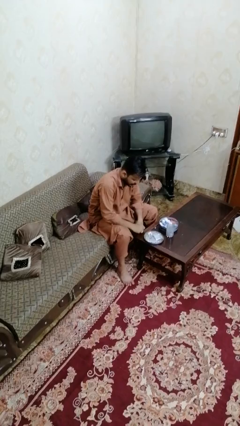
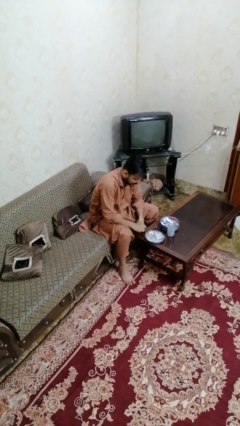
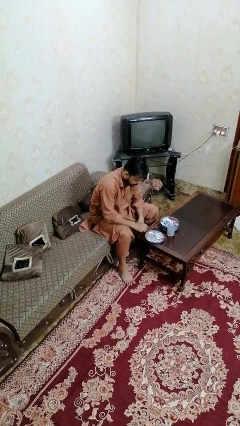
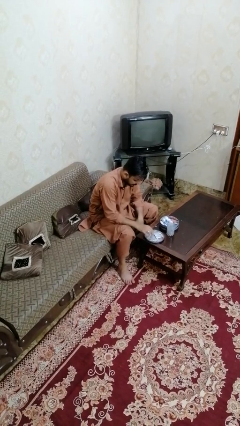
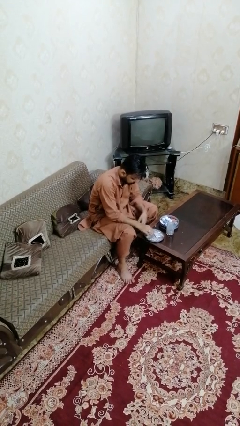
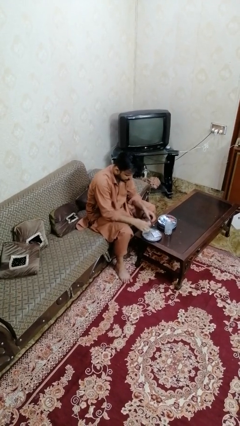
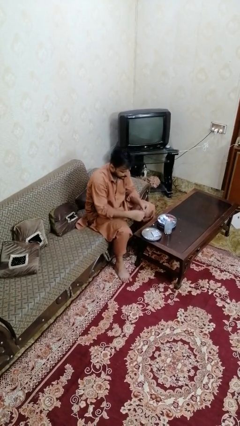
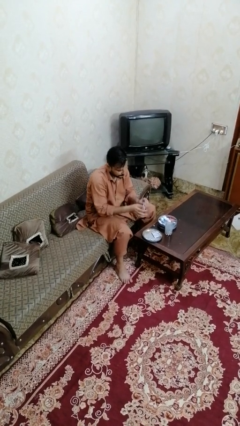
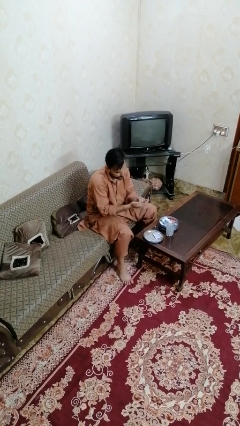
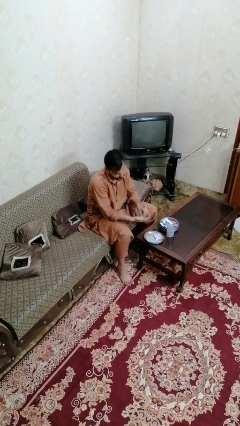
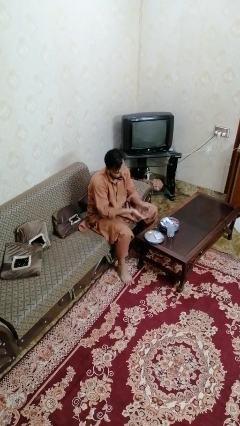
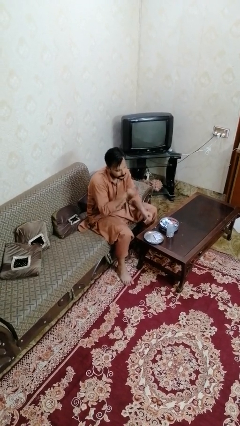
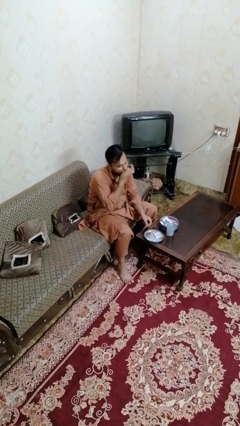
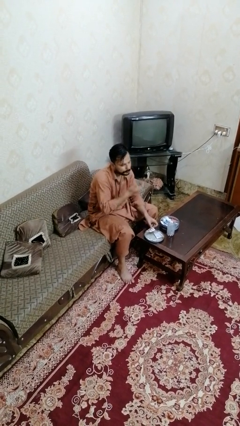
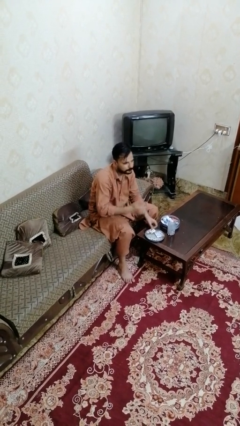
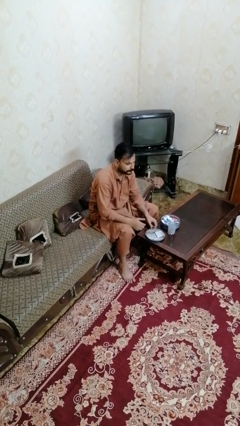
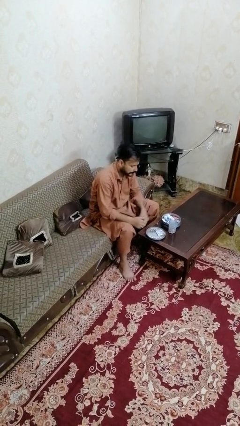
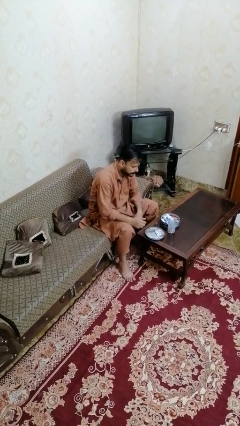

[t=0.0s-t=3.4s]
person takes medicine pills

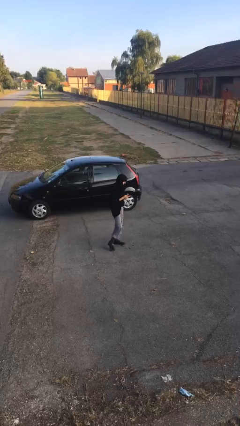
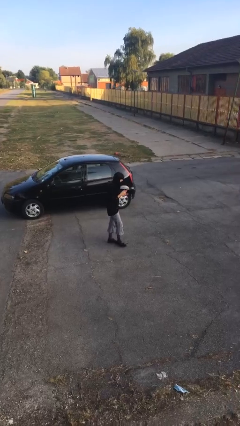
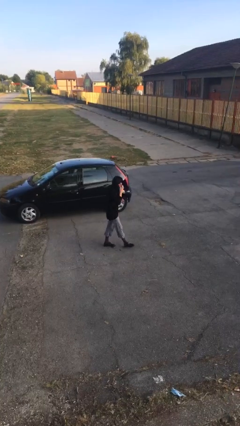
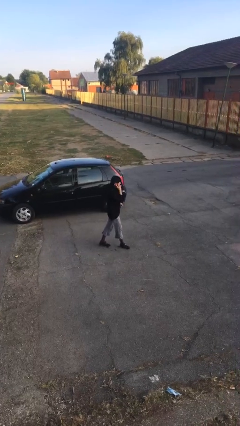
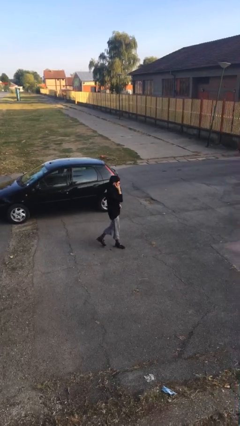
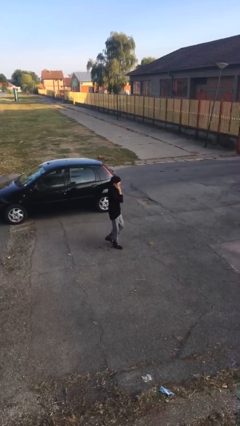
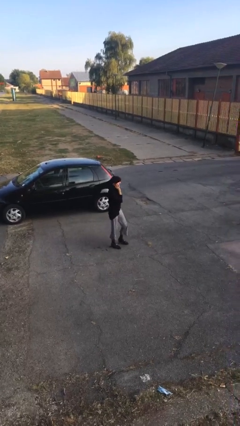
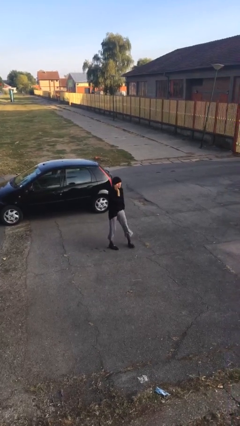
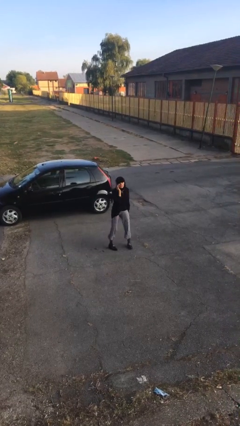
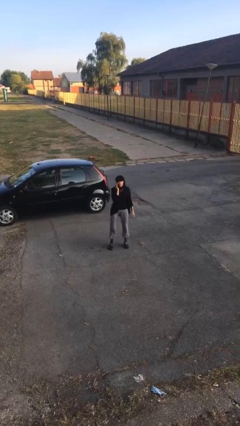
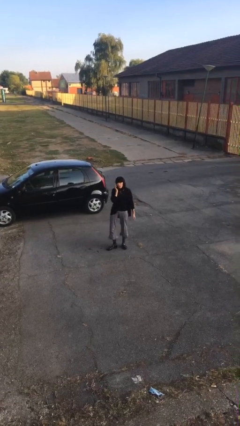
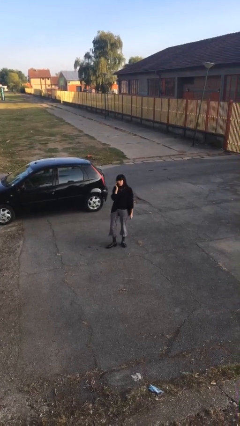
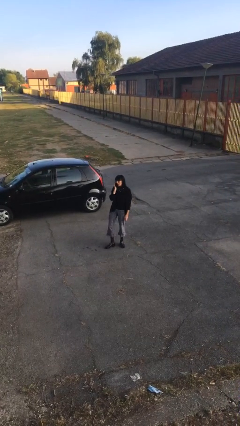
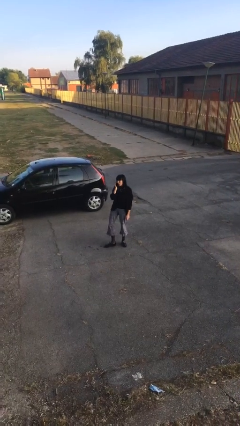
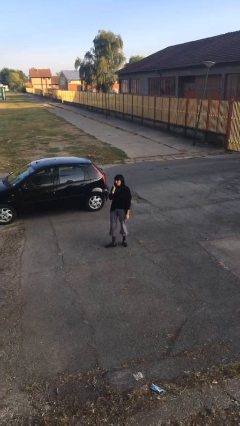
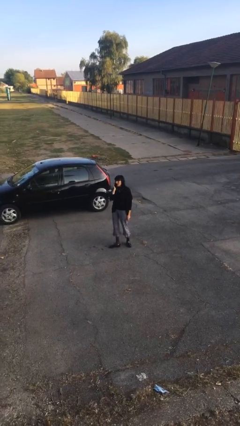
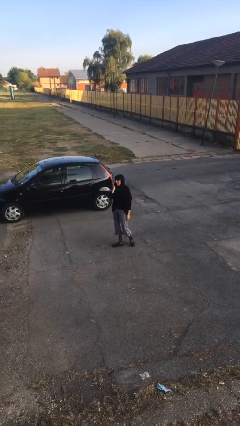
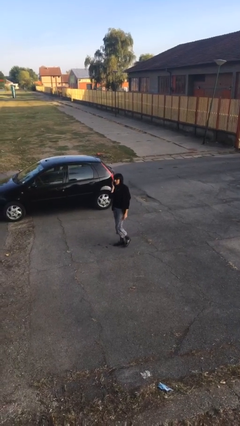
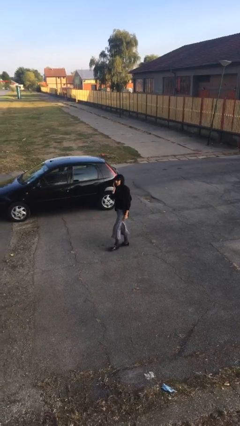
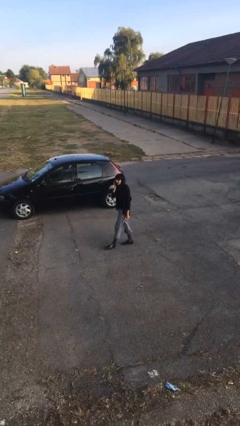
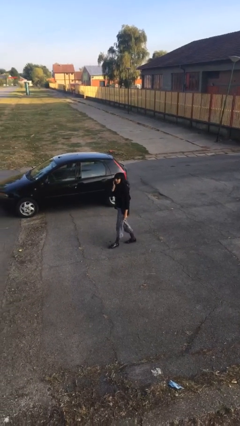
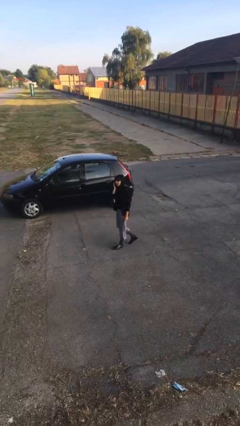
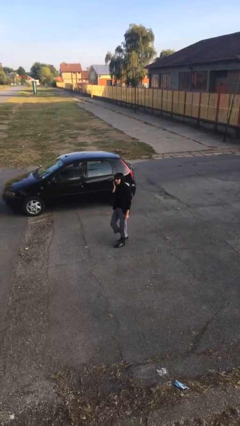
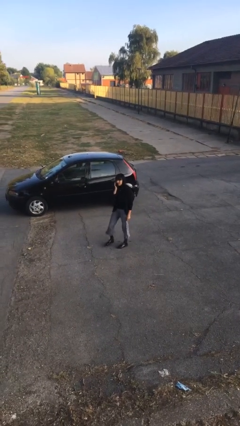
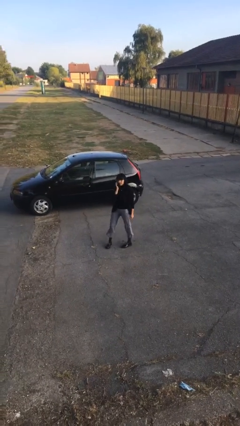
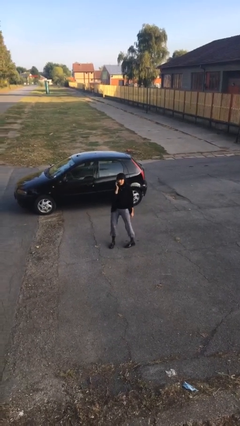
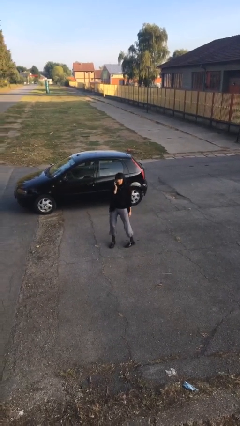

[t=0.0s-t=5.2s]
person talks on phone

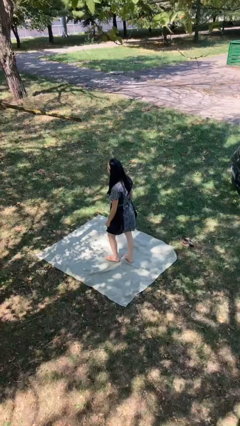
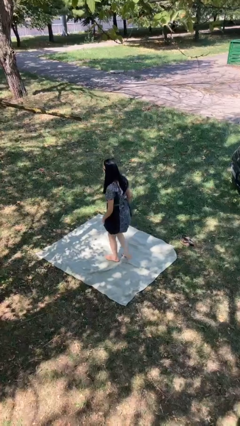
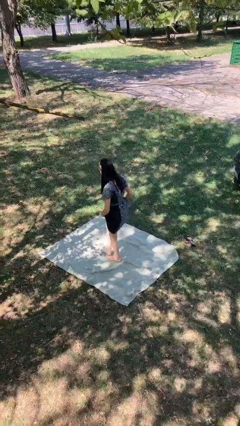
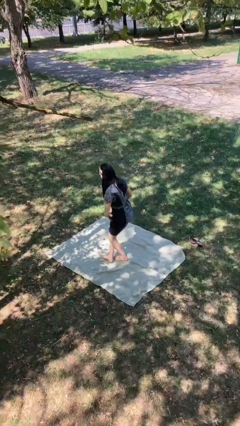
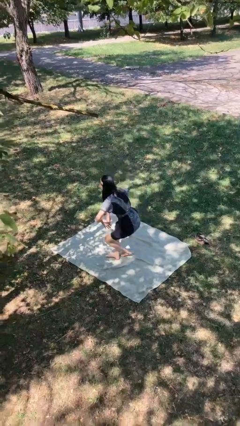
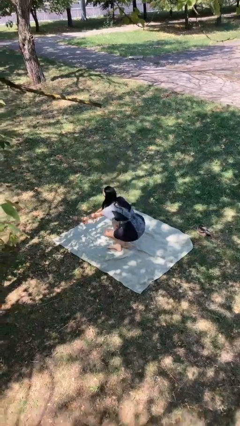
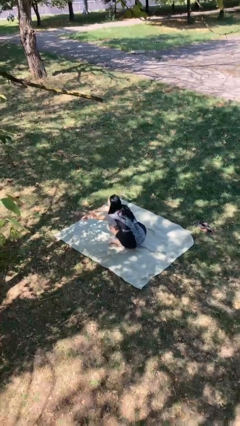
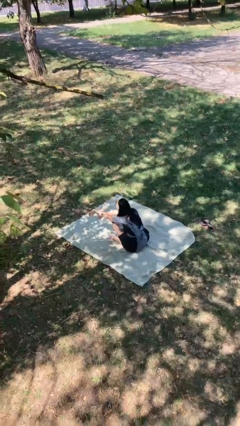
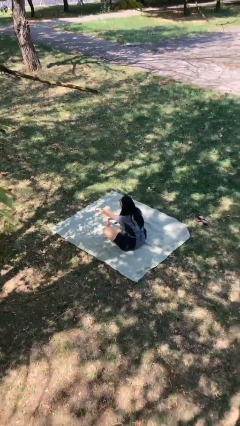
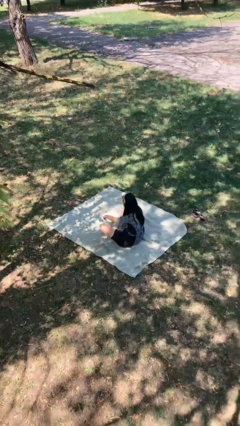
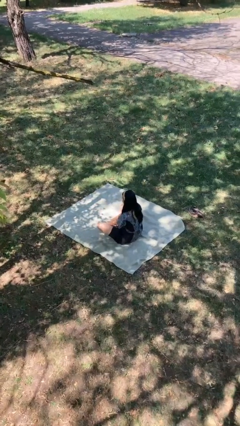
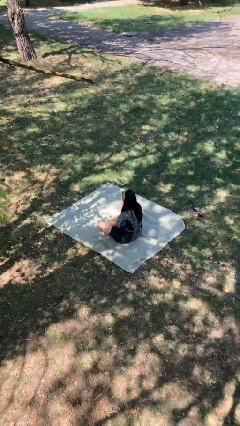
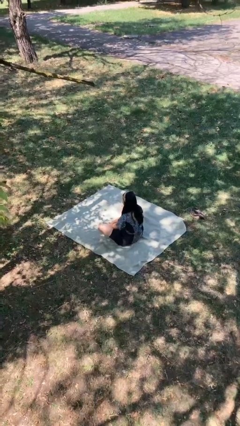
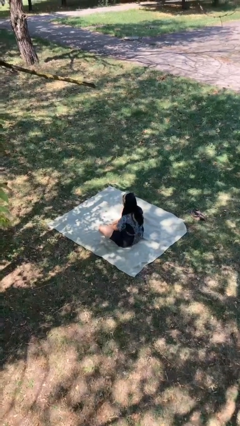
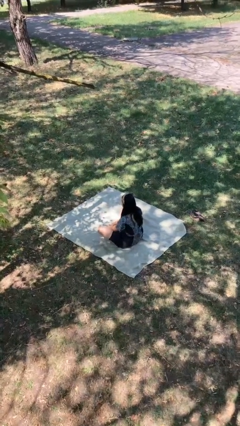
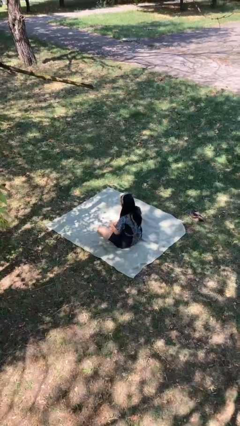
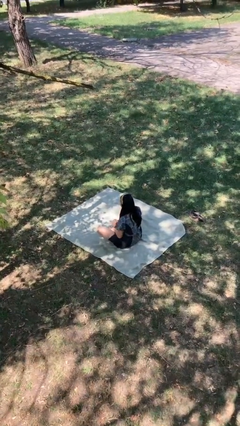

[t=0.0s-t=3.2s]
person sits crisscross

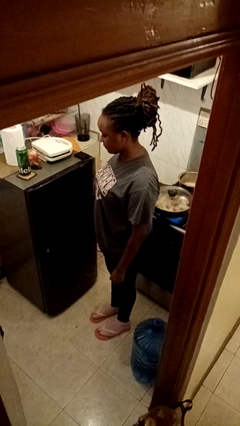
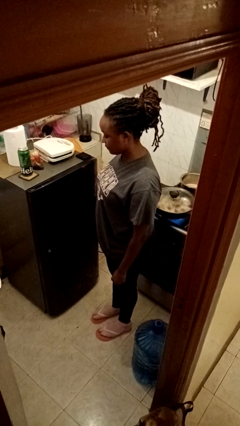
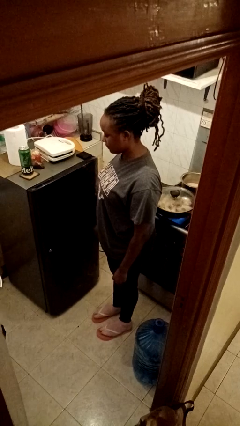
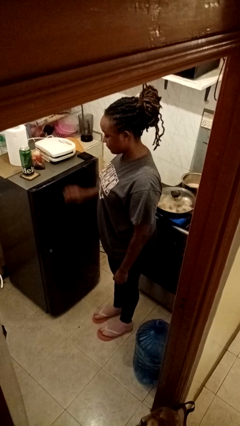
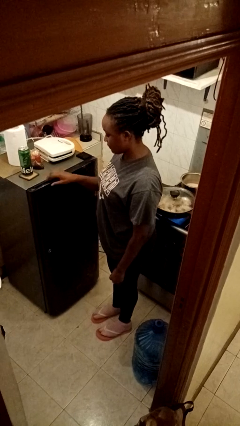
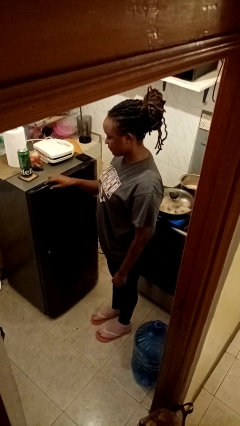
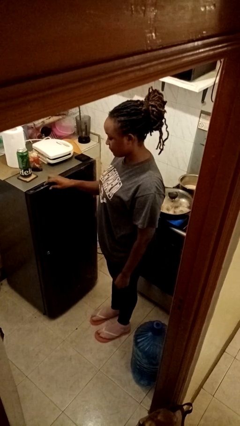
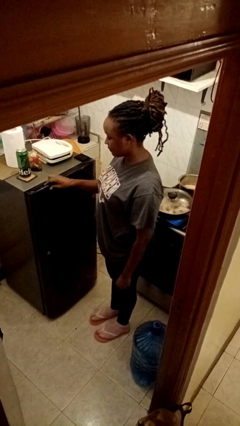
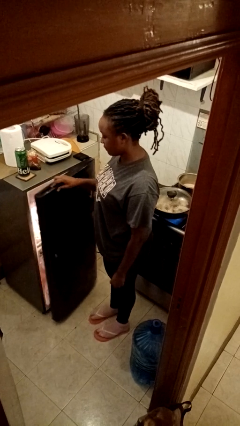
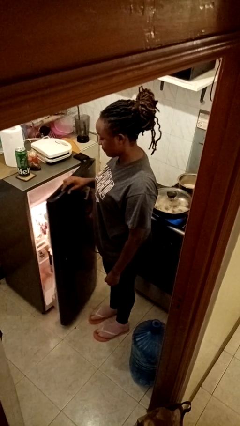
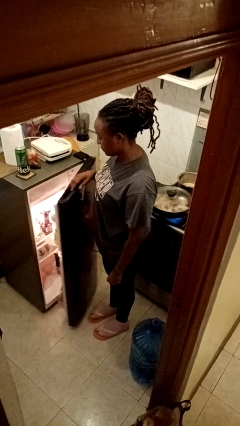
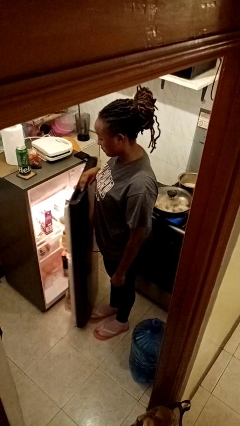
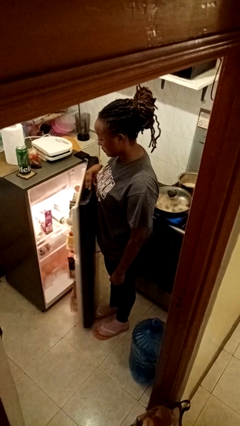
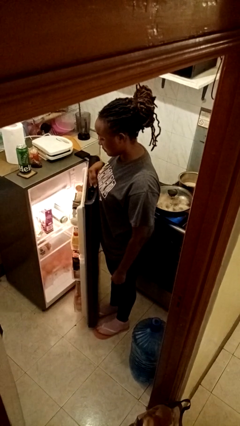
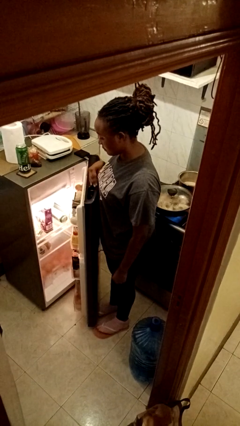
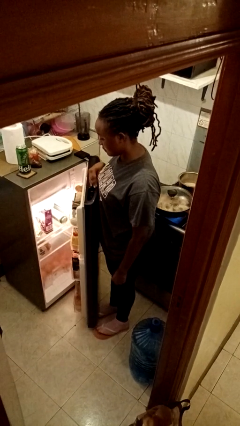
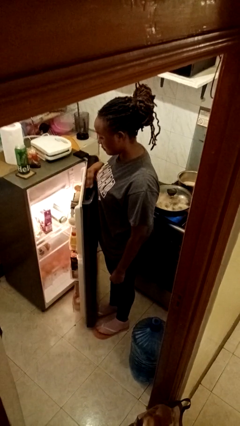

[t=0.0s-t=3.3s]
person opens refrigerator

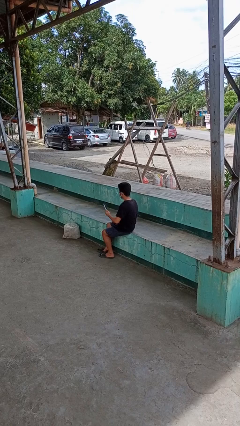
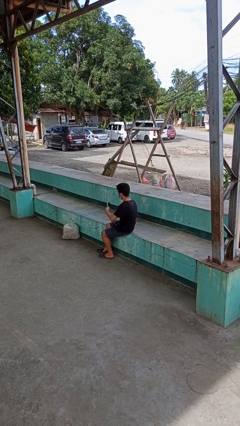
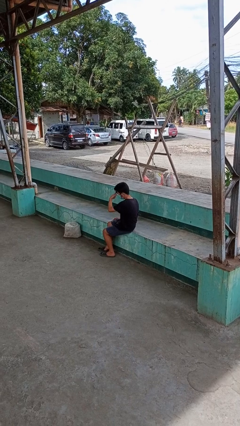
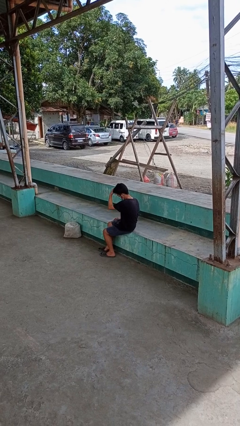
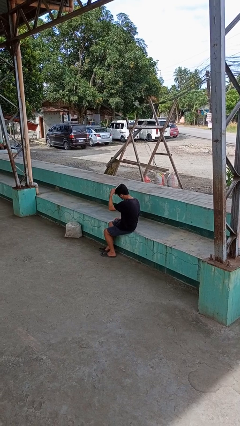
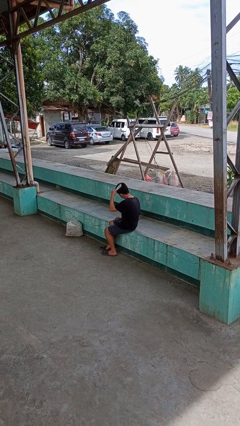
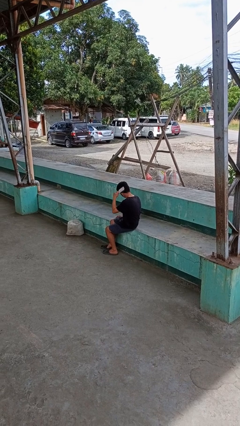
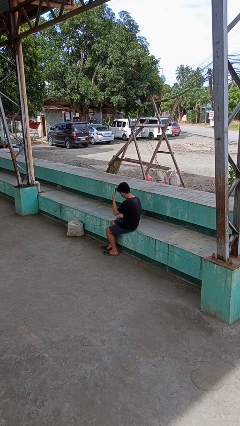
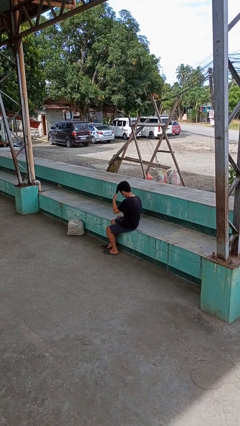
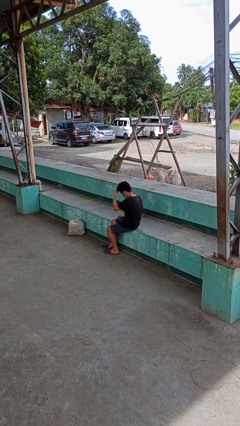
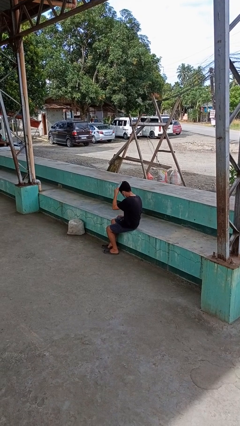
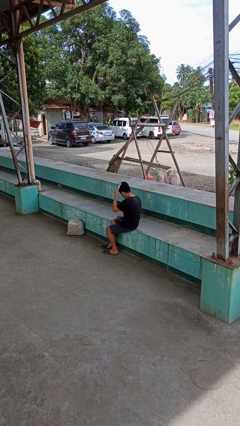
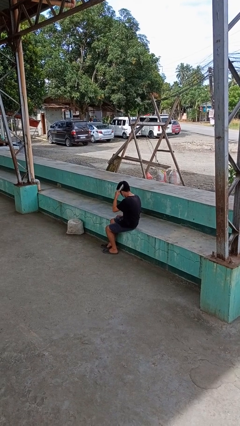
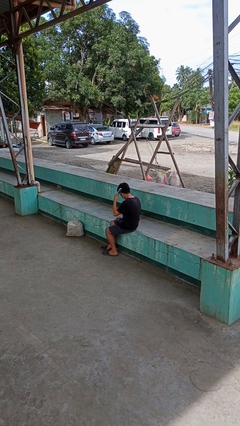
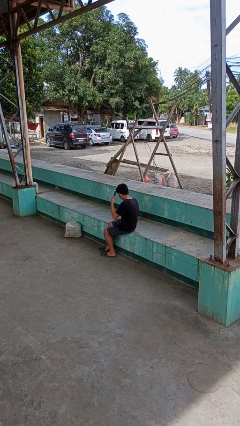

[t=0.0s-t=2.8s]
person brushes hair
